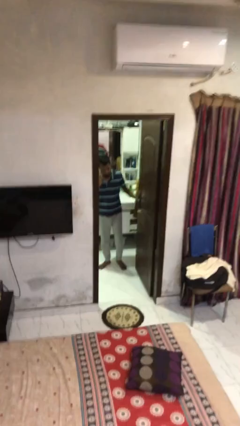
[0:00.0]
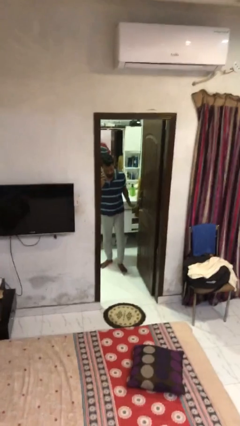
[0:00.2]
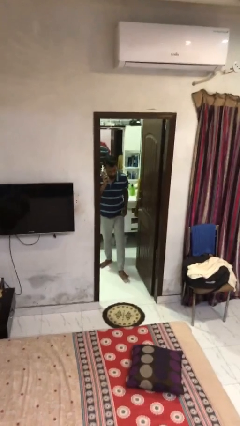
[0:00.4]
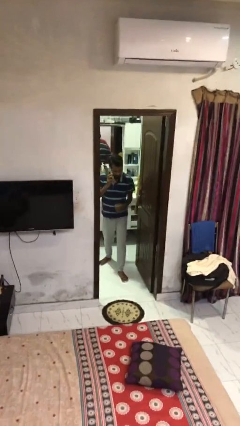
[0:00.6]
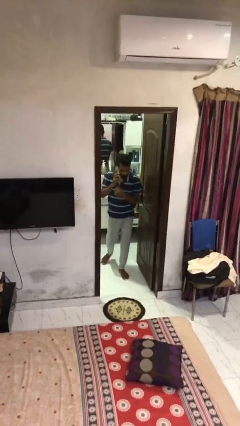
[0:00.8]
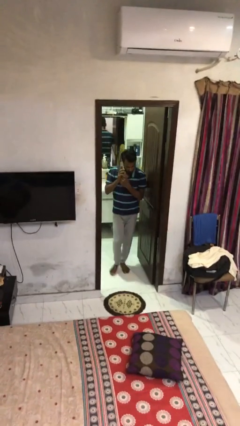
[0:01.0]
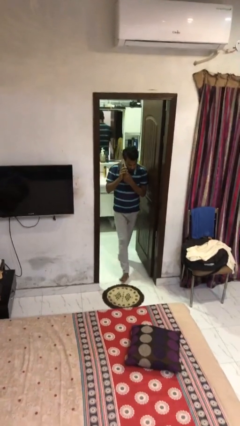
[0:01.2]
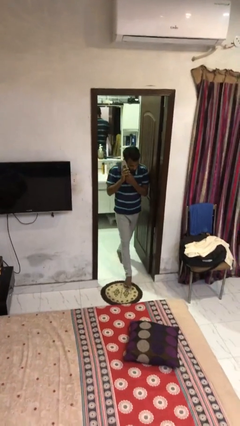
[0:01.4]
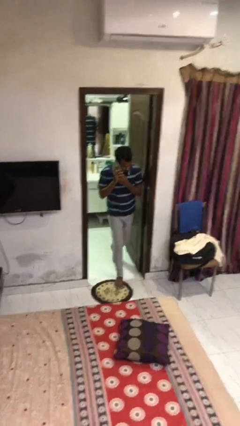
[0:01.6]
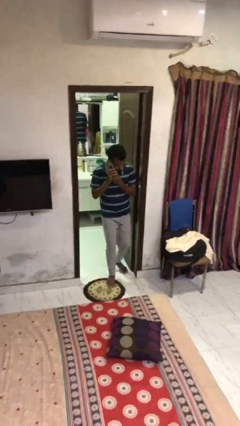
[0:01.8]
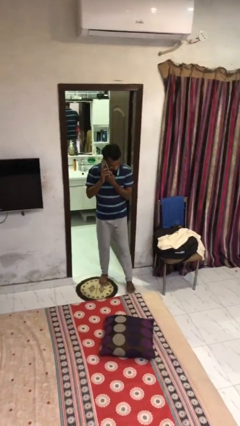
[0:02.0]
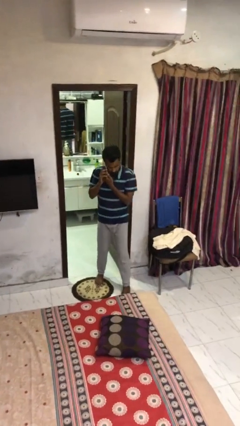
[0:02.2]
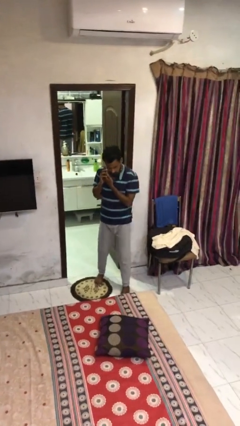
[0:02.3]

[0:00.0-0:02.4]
person enters scene through structure

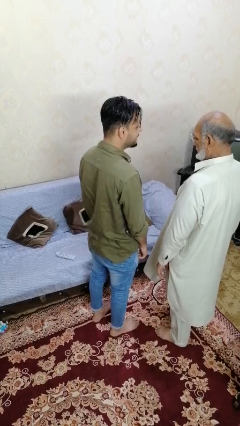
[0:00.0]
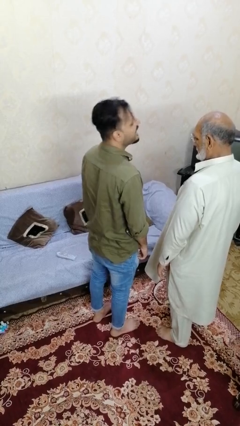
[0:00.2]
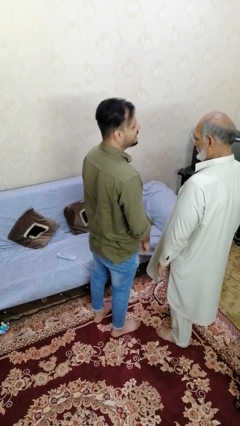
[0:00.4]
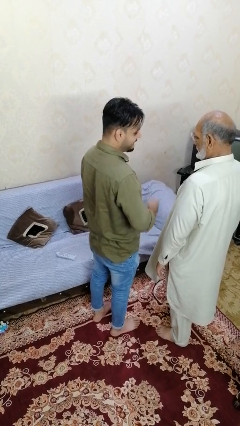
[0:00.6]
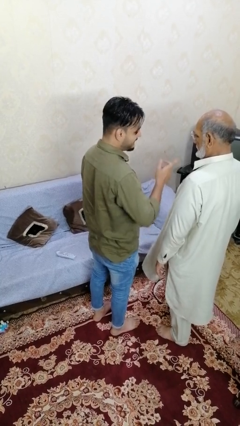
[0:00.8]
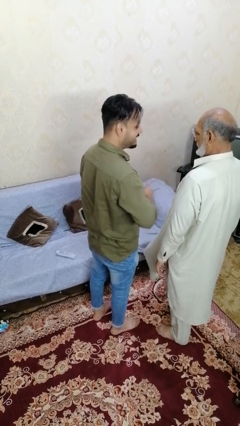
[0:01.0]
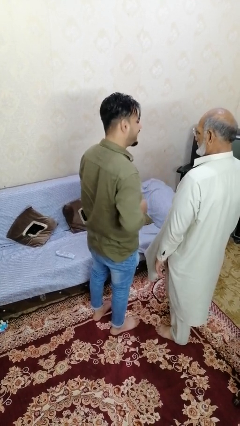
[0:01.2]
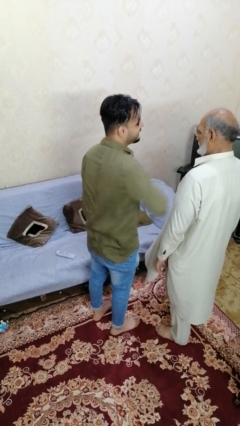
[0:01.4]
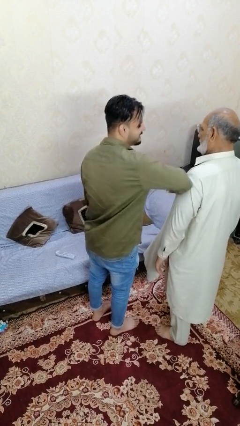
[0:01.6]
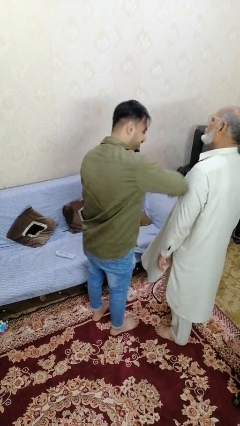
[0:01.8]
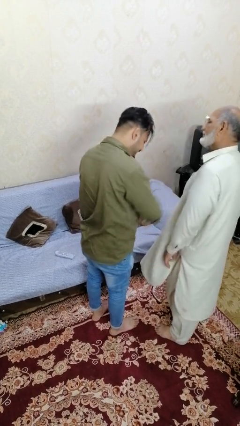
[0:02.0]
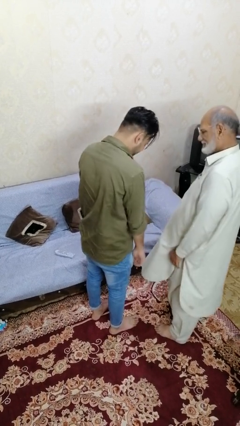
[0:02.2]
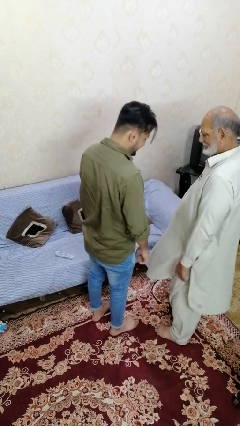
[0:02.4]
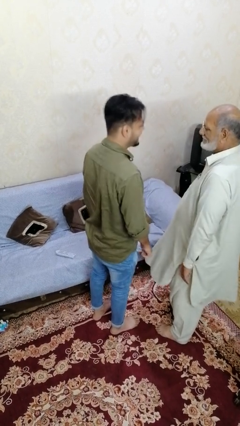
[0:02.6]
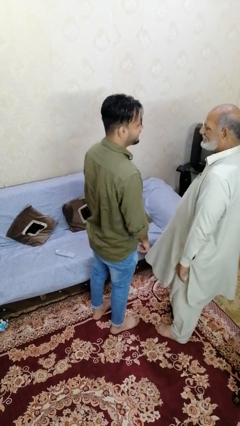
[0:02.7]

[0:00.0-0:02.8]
person nudges person with elbow

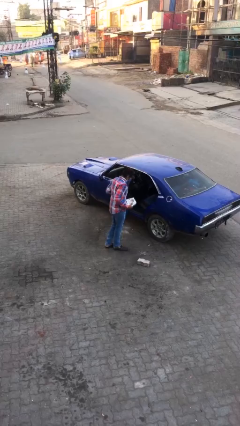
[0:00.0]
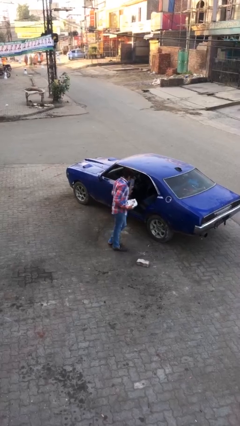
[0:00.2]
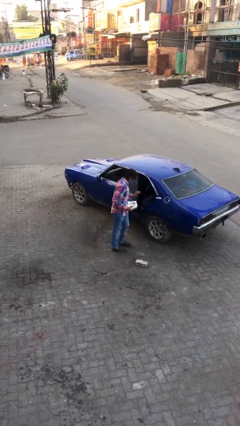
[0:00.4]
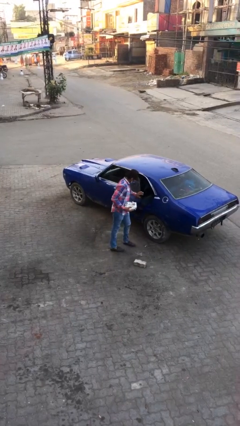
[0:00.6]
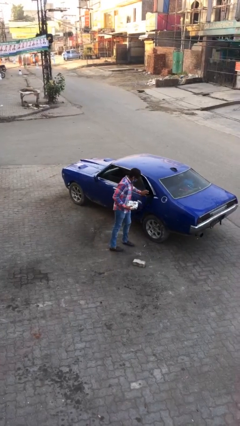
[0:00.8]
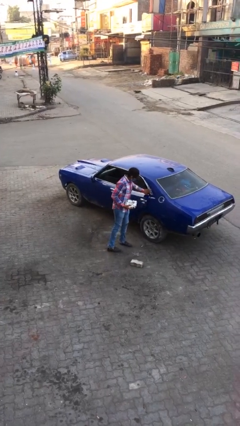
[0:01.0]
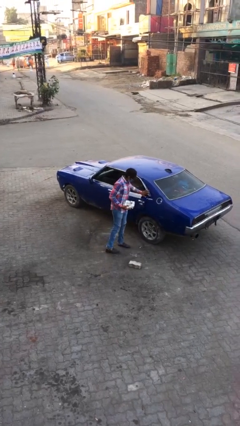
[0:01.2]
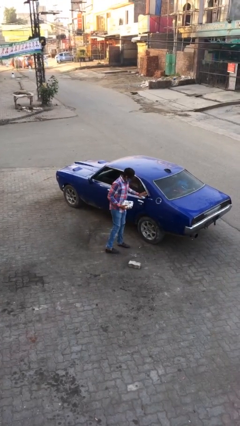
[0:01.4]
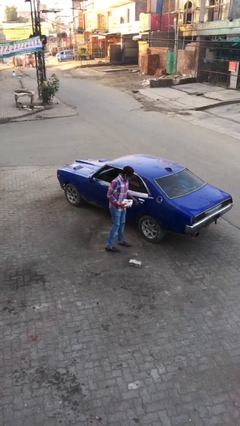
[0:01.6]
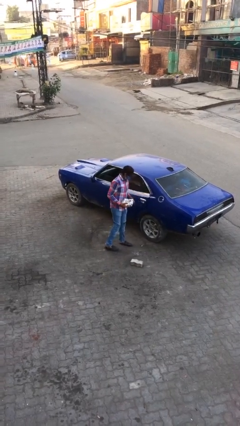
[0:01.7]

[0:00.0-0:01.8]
person closes car door

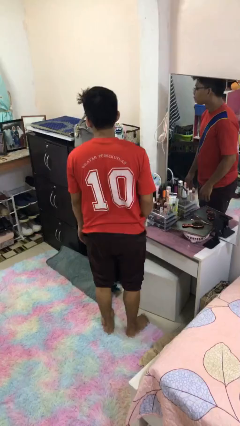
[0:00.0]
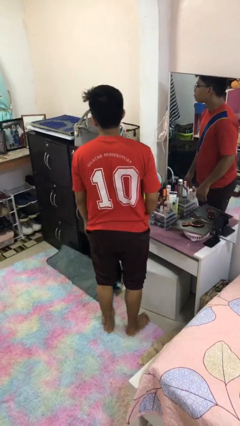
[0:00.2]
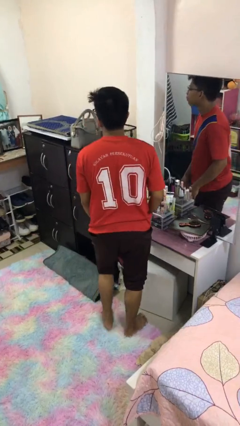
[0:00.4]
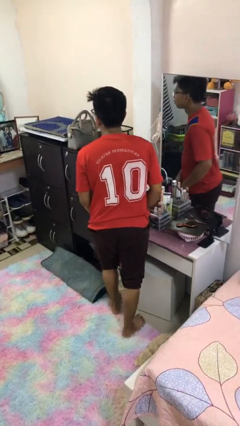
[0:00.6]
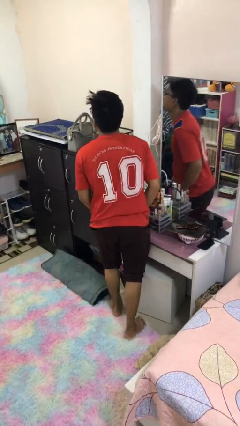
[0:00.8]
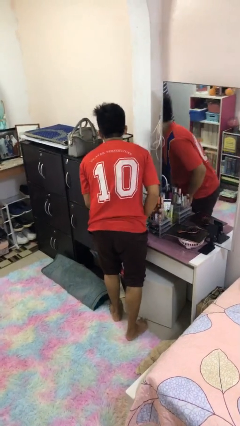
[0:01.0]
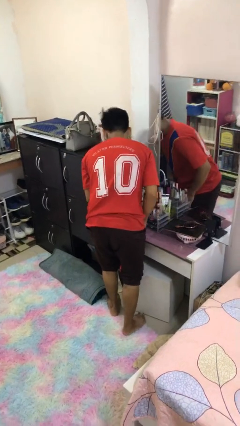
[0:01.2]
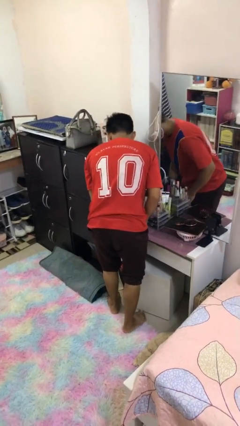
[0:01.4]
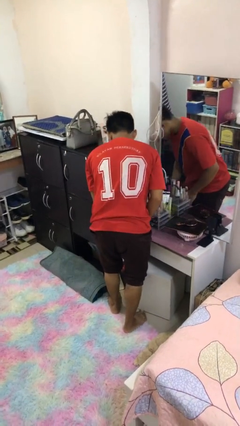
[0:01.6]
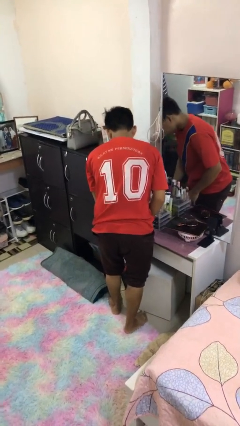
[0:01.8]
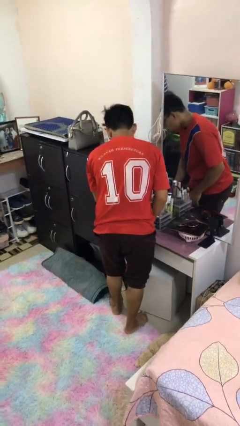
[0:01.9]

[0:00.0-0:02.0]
person bumps into table

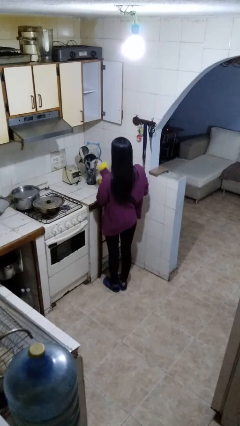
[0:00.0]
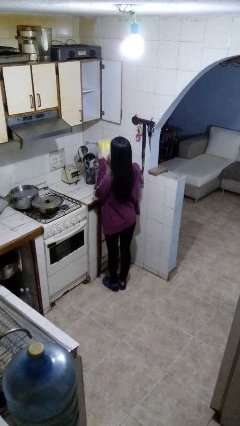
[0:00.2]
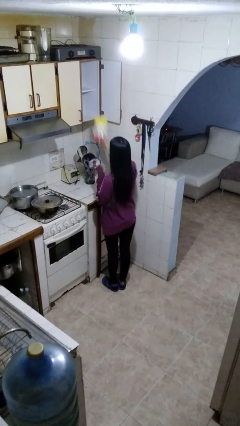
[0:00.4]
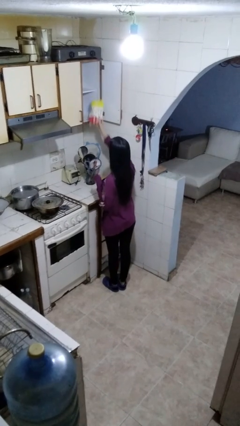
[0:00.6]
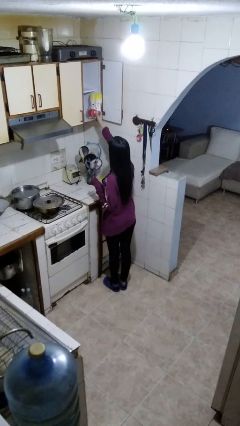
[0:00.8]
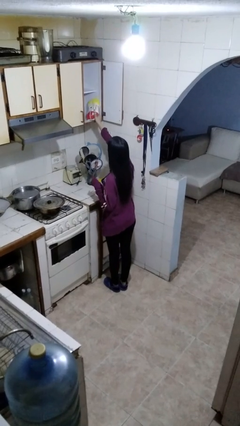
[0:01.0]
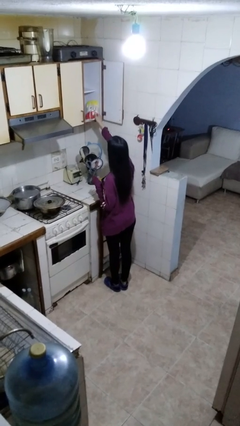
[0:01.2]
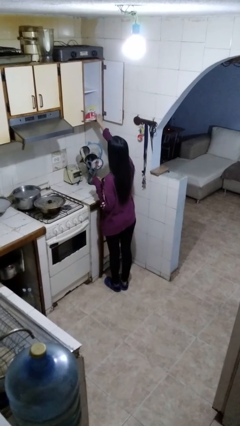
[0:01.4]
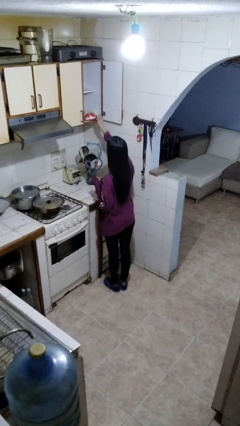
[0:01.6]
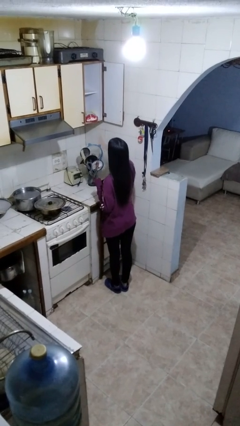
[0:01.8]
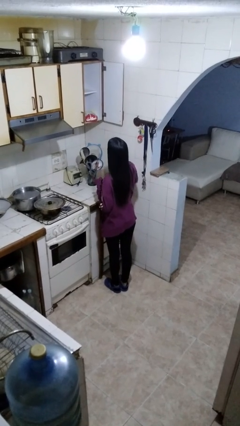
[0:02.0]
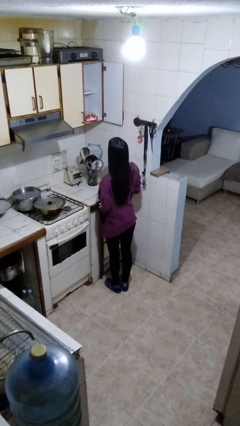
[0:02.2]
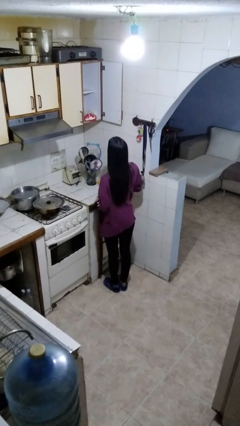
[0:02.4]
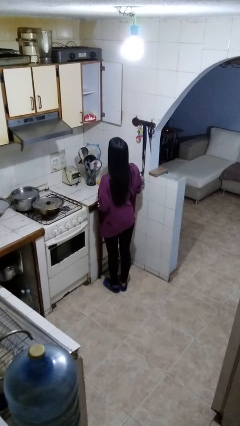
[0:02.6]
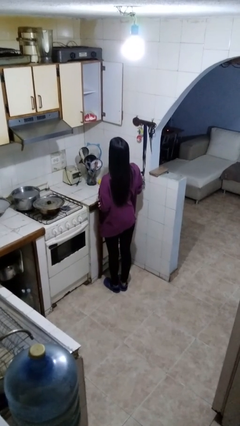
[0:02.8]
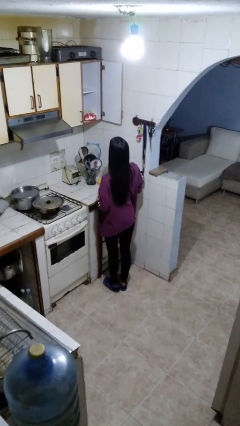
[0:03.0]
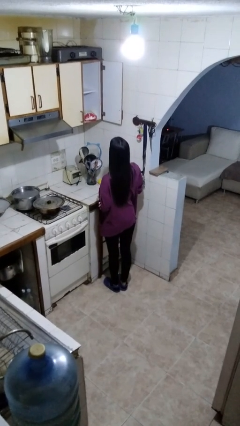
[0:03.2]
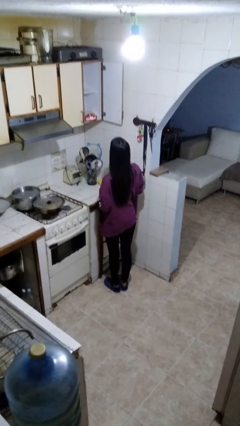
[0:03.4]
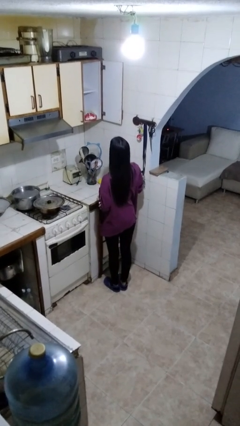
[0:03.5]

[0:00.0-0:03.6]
person picks up object from cabinet

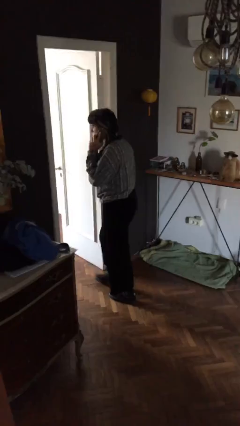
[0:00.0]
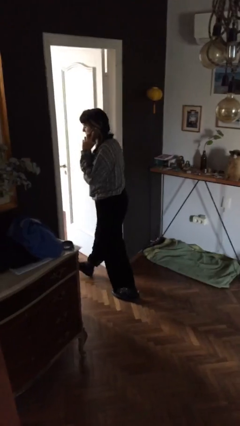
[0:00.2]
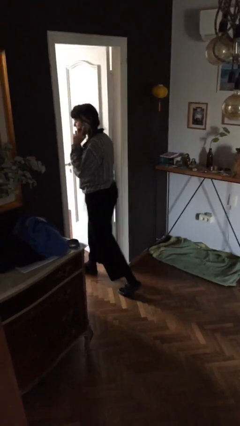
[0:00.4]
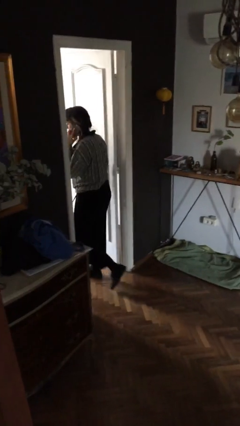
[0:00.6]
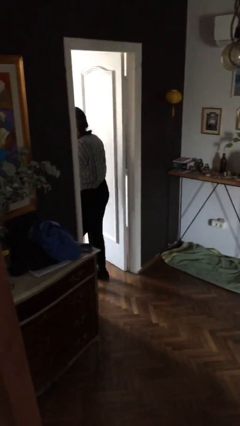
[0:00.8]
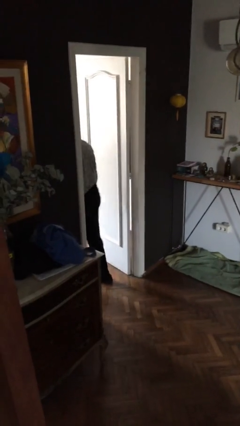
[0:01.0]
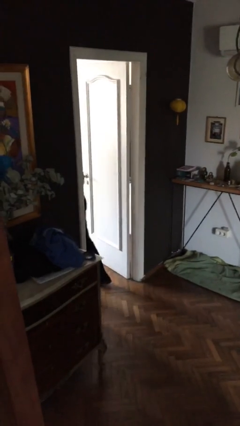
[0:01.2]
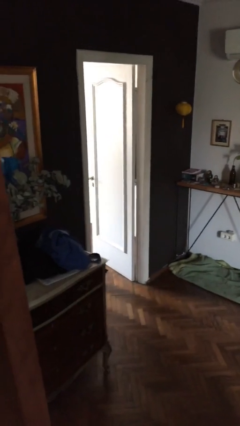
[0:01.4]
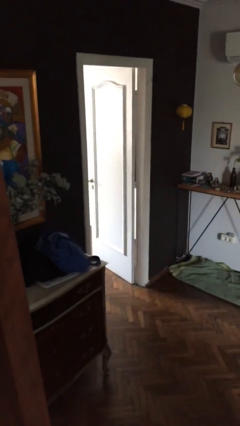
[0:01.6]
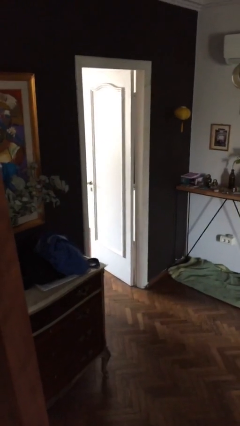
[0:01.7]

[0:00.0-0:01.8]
person exits scene through structure

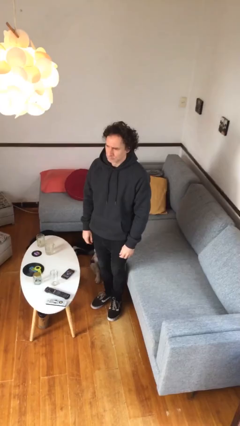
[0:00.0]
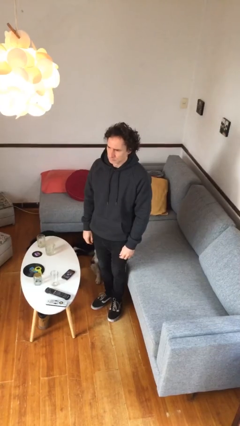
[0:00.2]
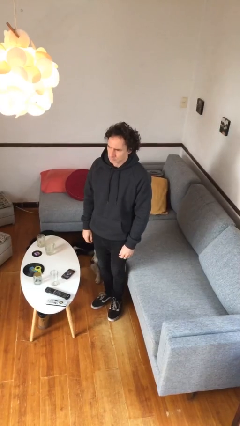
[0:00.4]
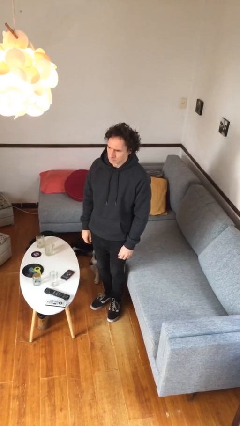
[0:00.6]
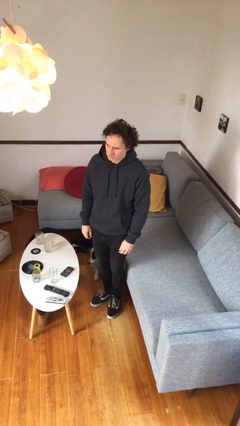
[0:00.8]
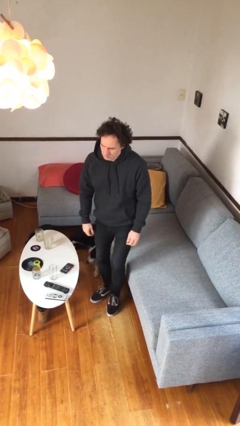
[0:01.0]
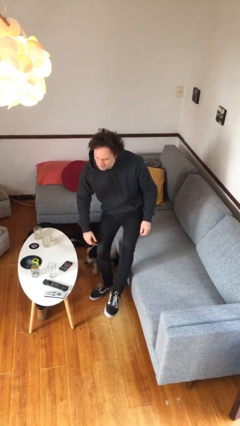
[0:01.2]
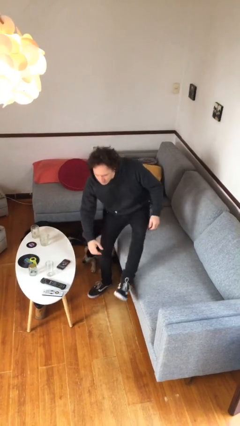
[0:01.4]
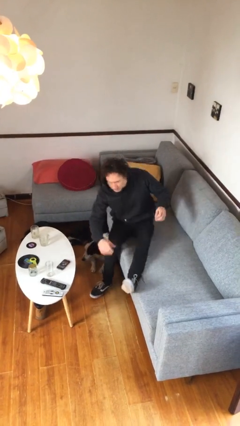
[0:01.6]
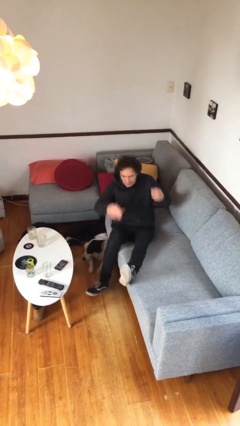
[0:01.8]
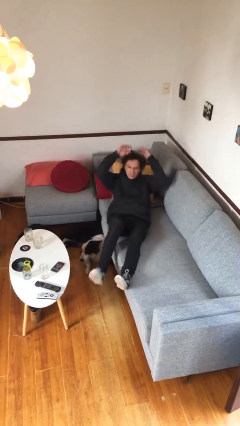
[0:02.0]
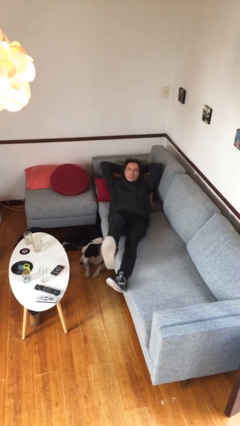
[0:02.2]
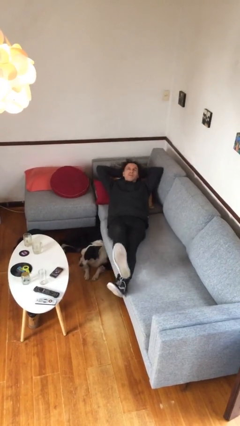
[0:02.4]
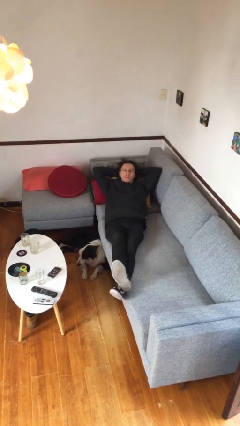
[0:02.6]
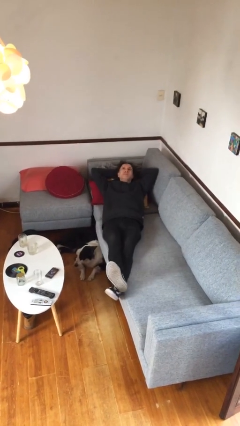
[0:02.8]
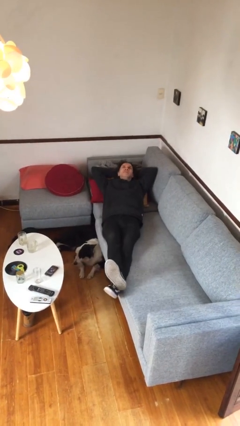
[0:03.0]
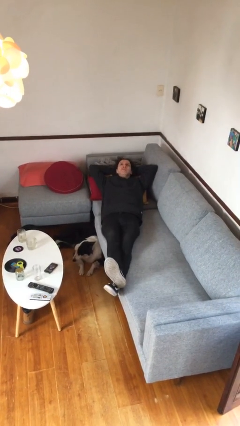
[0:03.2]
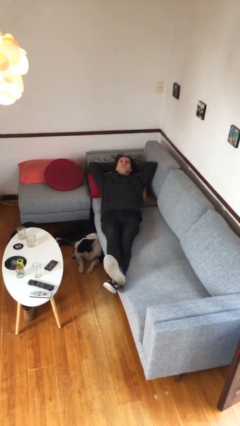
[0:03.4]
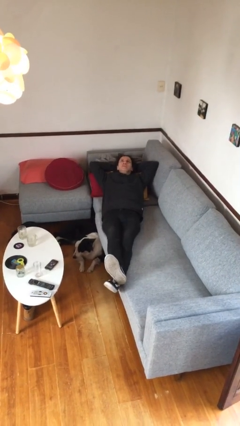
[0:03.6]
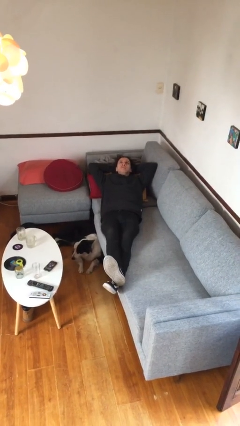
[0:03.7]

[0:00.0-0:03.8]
person lies down on couch
